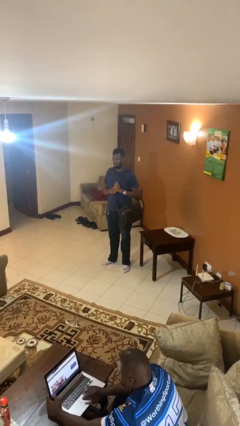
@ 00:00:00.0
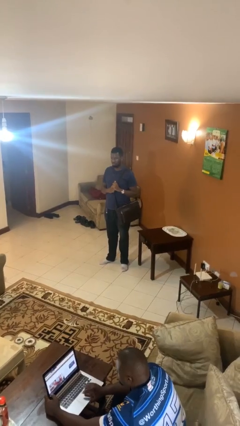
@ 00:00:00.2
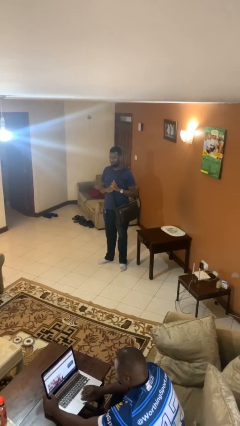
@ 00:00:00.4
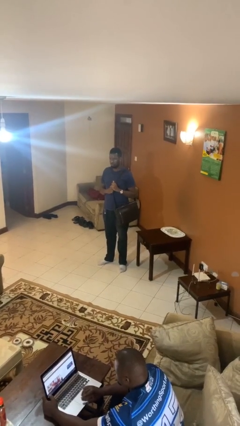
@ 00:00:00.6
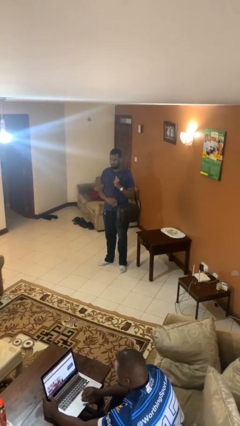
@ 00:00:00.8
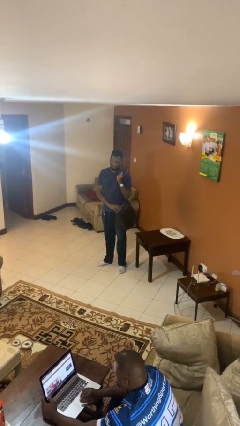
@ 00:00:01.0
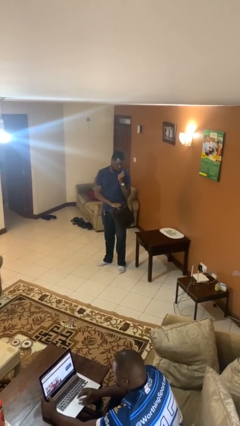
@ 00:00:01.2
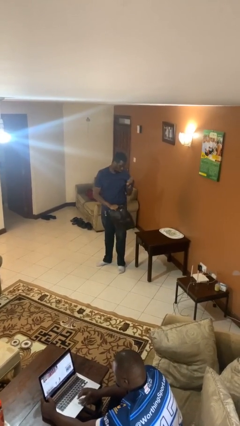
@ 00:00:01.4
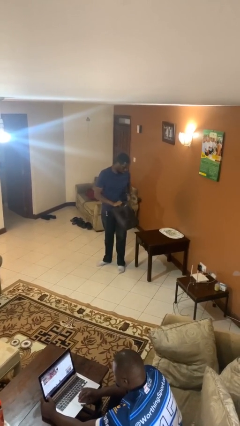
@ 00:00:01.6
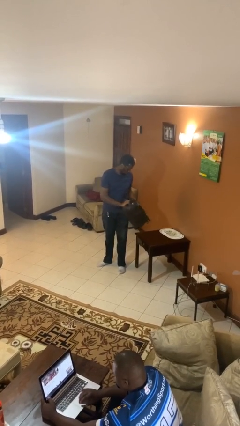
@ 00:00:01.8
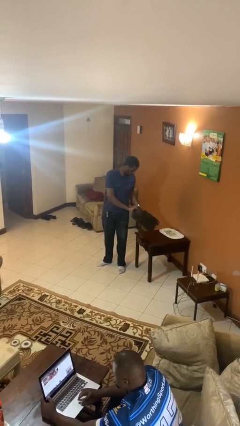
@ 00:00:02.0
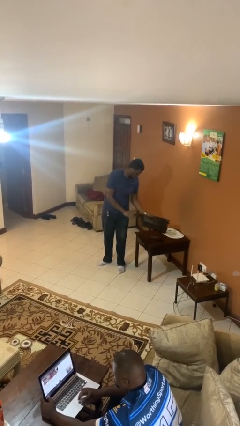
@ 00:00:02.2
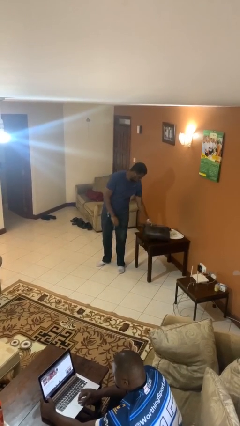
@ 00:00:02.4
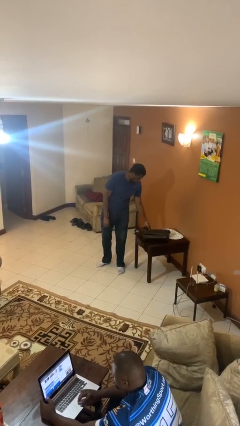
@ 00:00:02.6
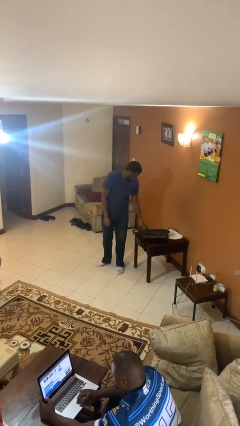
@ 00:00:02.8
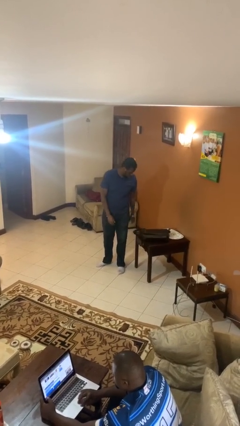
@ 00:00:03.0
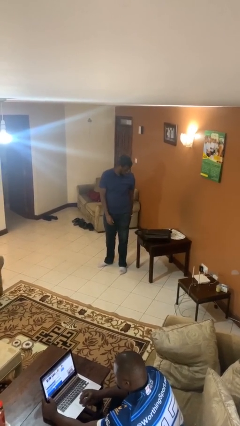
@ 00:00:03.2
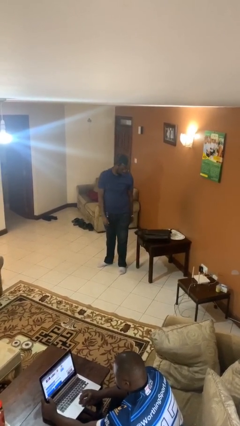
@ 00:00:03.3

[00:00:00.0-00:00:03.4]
person puts down object on table

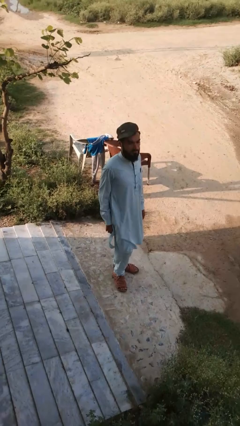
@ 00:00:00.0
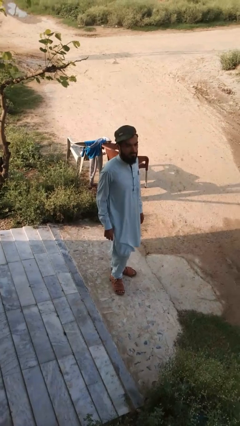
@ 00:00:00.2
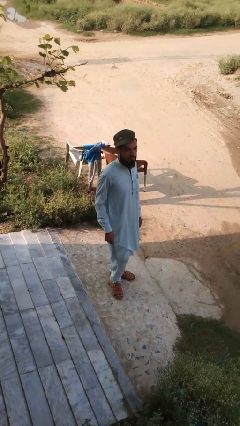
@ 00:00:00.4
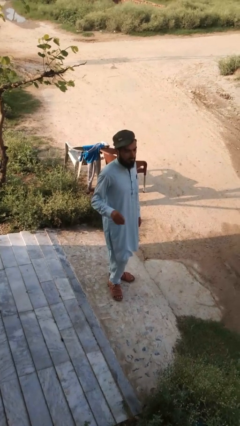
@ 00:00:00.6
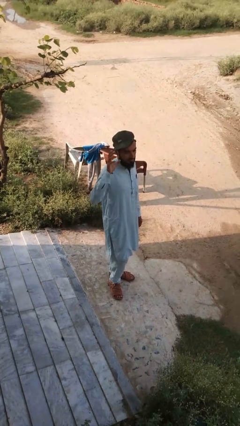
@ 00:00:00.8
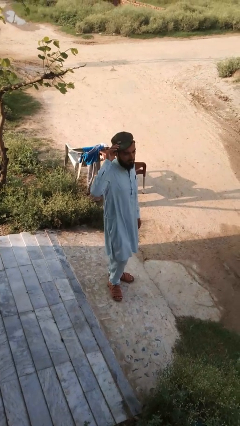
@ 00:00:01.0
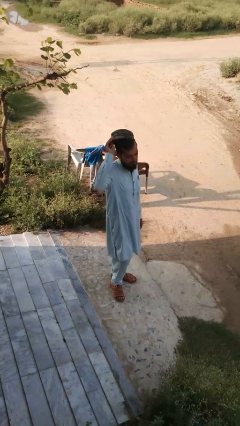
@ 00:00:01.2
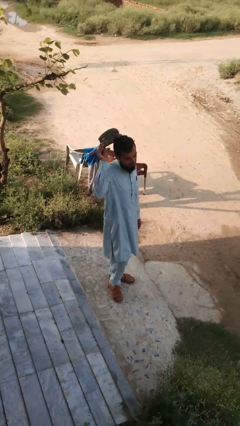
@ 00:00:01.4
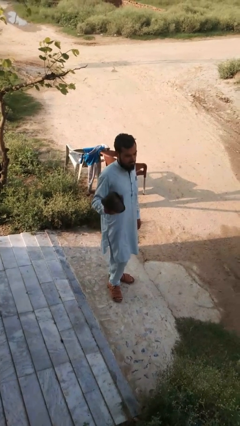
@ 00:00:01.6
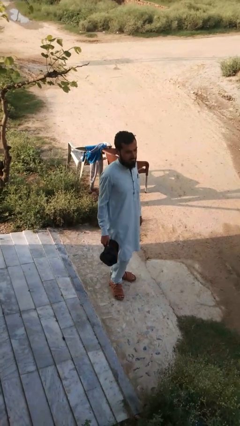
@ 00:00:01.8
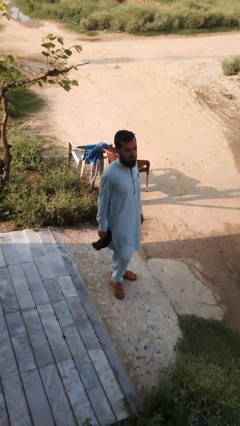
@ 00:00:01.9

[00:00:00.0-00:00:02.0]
person takes off hat

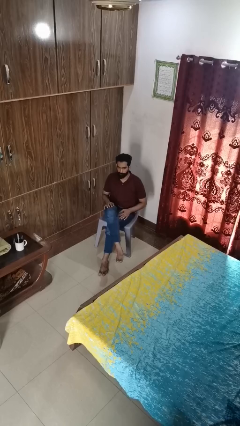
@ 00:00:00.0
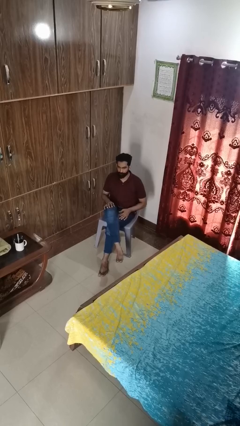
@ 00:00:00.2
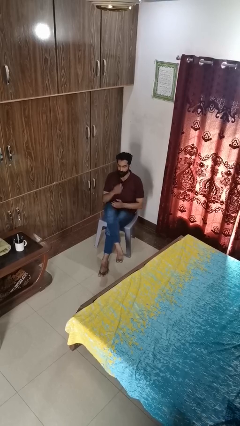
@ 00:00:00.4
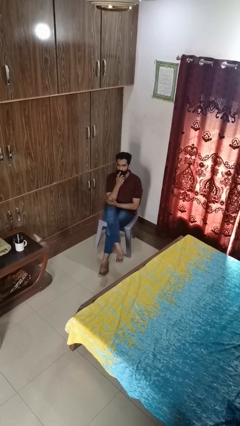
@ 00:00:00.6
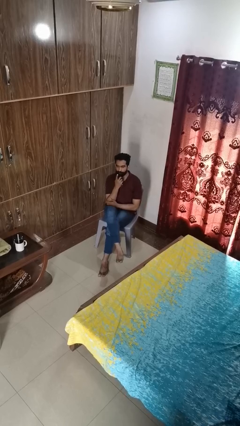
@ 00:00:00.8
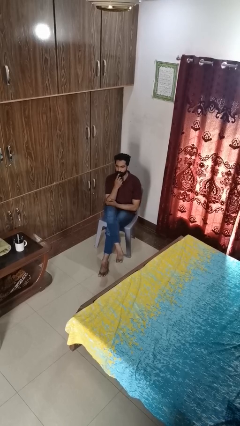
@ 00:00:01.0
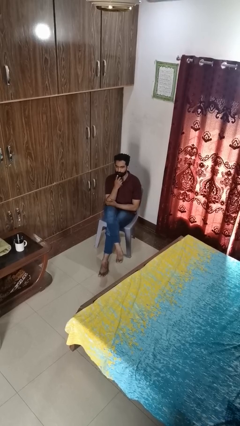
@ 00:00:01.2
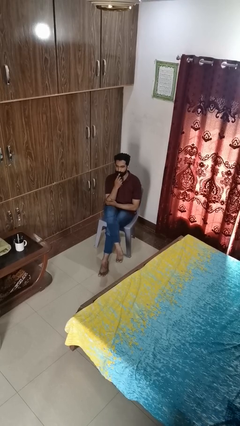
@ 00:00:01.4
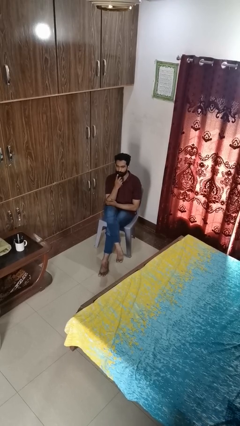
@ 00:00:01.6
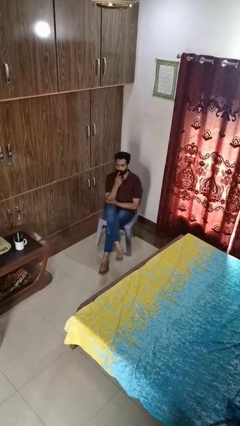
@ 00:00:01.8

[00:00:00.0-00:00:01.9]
person strokes chin

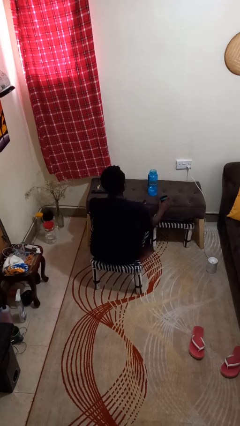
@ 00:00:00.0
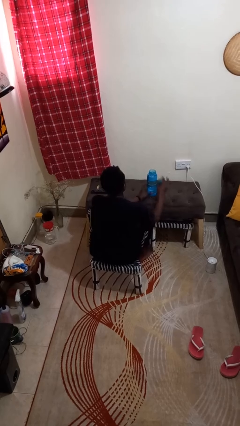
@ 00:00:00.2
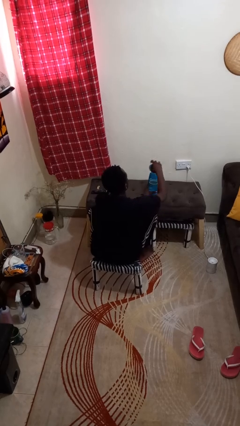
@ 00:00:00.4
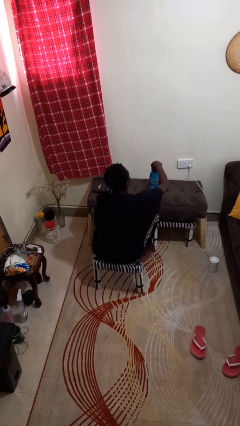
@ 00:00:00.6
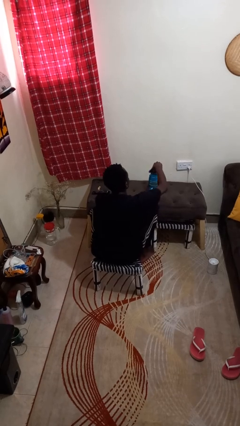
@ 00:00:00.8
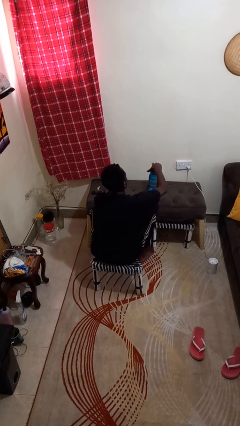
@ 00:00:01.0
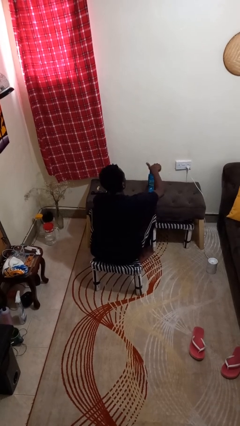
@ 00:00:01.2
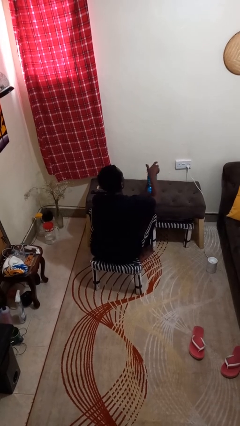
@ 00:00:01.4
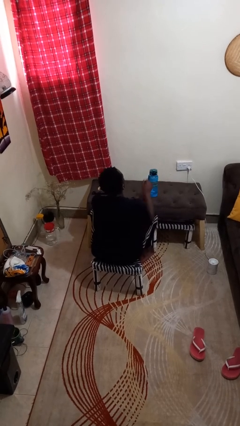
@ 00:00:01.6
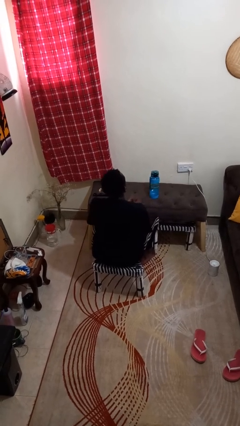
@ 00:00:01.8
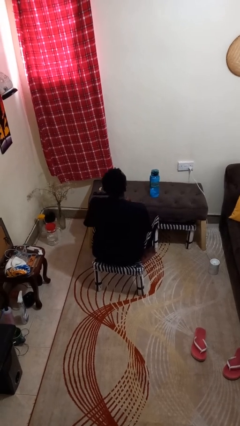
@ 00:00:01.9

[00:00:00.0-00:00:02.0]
person closes jar

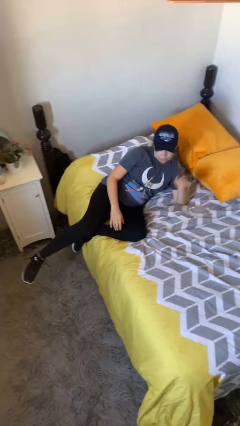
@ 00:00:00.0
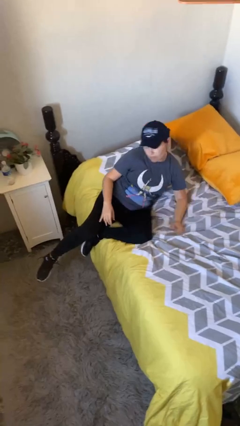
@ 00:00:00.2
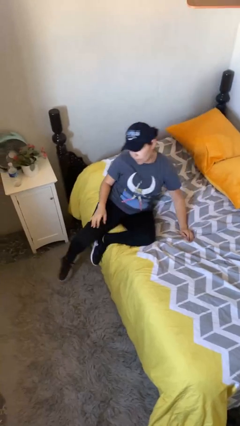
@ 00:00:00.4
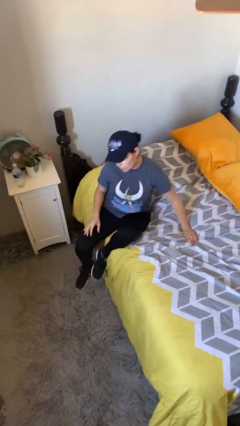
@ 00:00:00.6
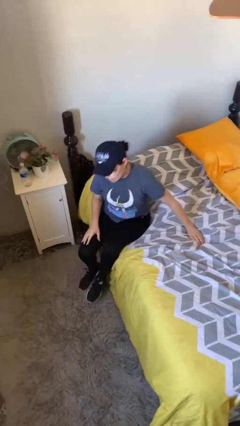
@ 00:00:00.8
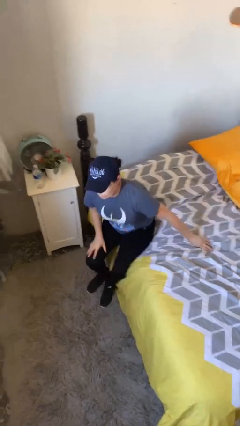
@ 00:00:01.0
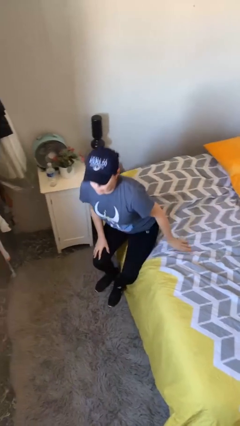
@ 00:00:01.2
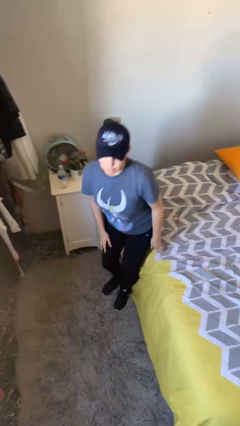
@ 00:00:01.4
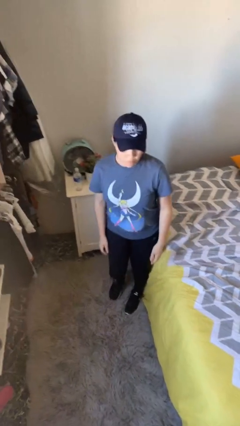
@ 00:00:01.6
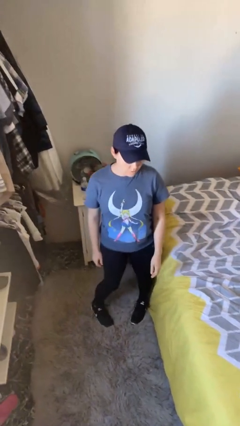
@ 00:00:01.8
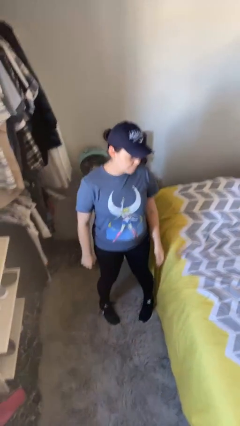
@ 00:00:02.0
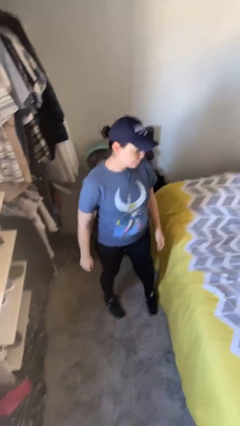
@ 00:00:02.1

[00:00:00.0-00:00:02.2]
person stands up

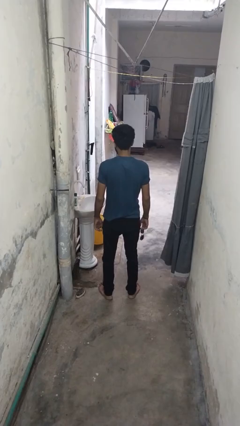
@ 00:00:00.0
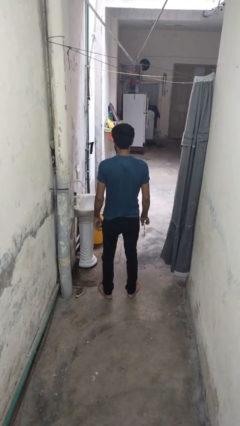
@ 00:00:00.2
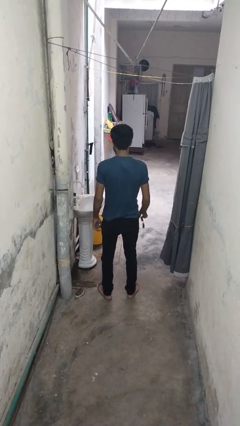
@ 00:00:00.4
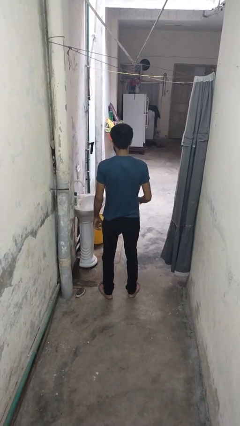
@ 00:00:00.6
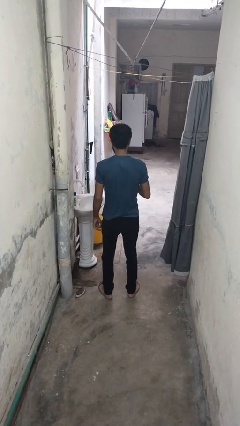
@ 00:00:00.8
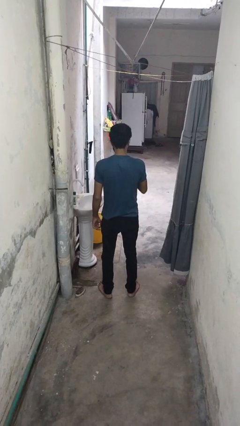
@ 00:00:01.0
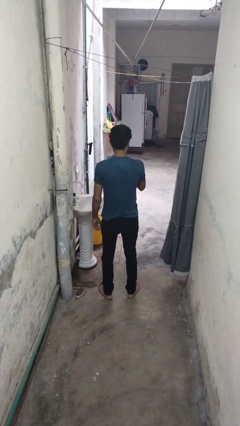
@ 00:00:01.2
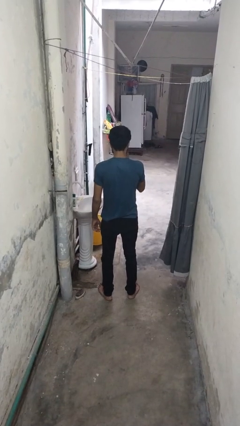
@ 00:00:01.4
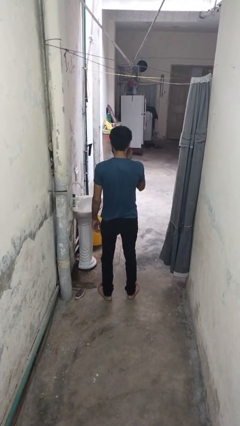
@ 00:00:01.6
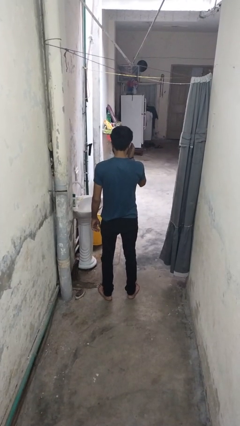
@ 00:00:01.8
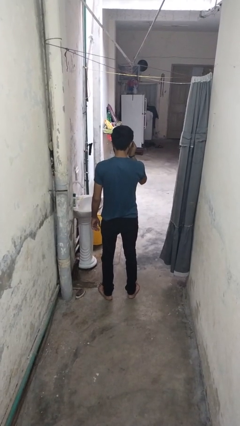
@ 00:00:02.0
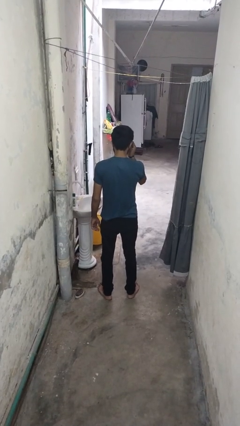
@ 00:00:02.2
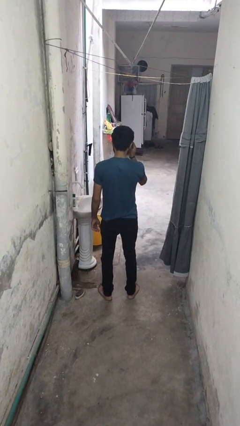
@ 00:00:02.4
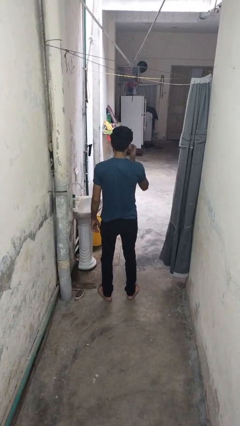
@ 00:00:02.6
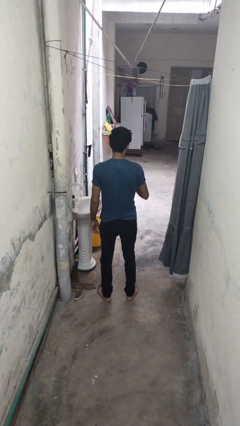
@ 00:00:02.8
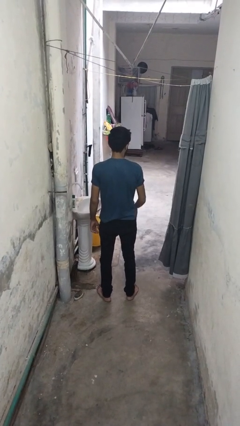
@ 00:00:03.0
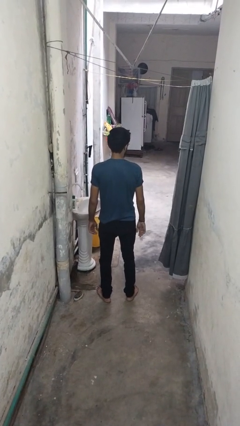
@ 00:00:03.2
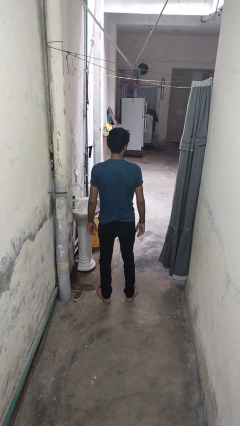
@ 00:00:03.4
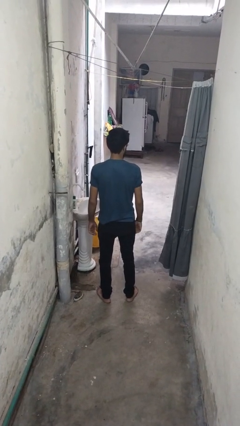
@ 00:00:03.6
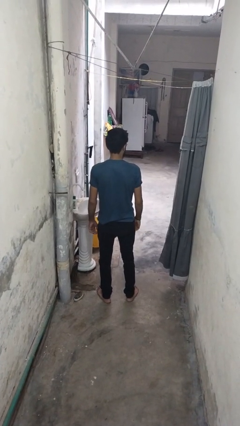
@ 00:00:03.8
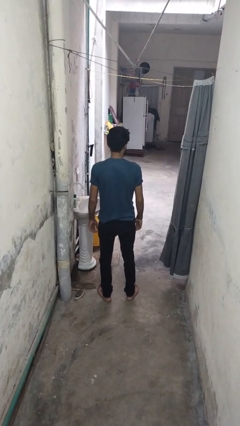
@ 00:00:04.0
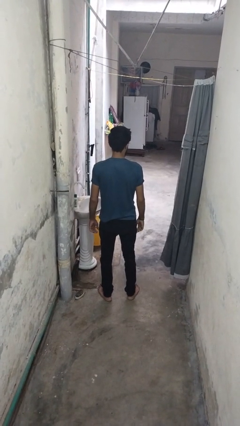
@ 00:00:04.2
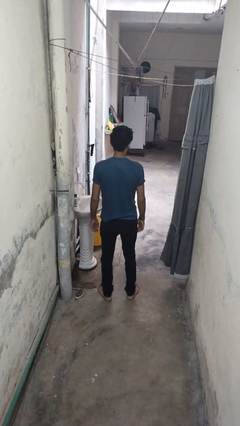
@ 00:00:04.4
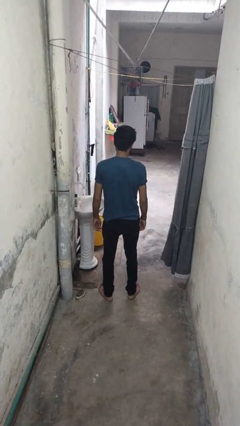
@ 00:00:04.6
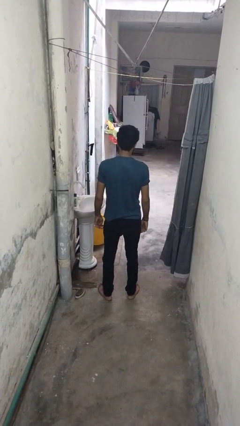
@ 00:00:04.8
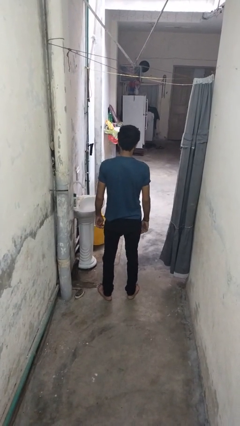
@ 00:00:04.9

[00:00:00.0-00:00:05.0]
person puts on sunglasses

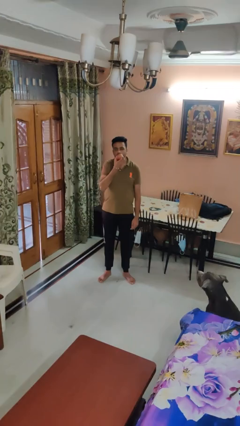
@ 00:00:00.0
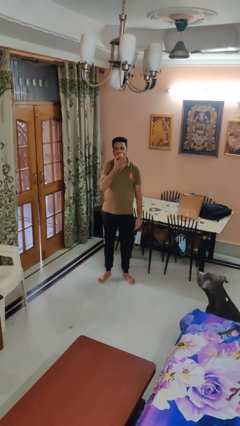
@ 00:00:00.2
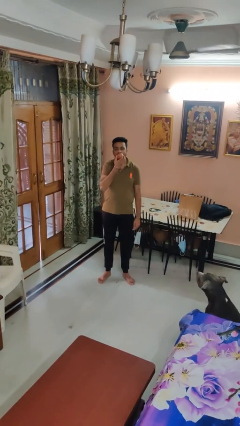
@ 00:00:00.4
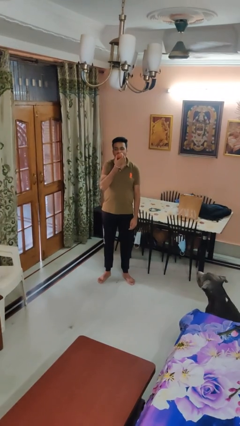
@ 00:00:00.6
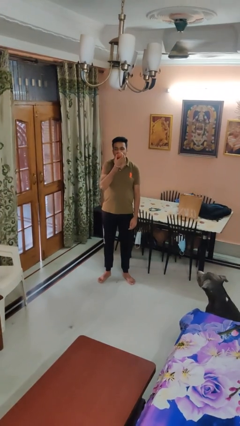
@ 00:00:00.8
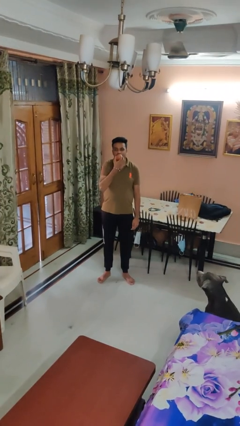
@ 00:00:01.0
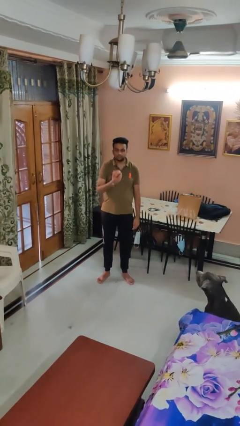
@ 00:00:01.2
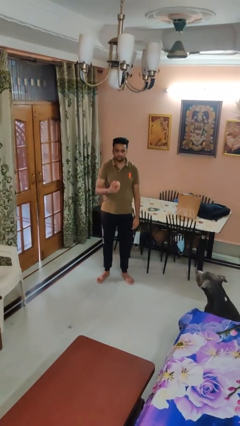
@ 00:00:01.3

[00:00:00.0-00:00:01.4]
person eats apple
